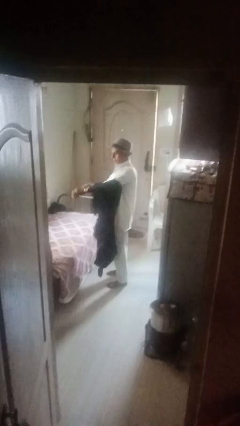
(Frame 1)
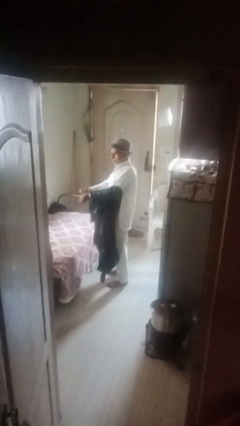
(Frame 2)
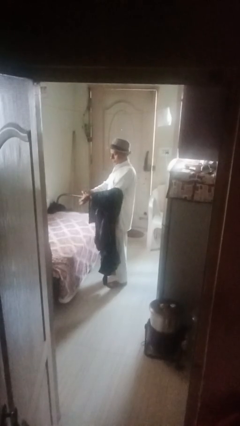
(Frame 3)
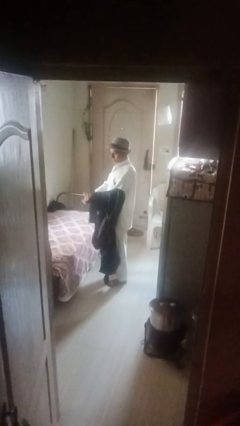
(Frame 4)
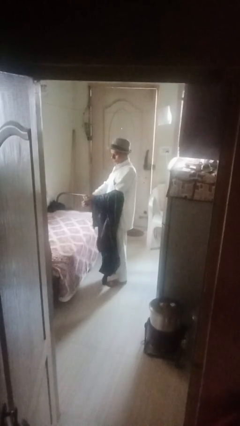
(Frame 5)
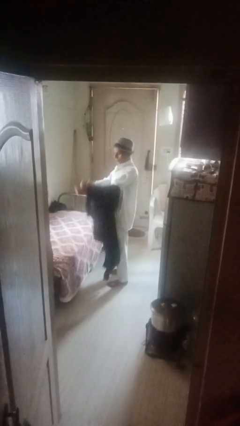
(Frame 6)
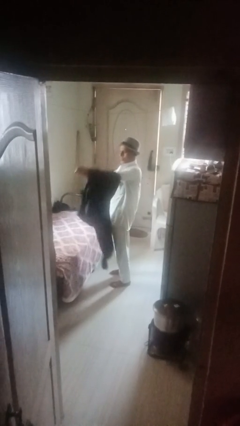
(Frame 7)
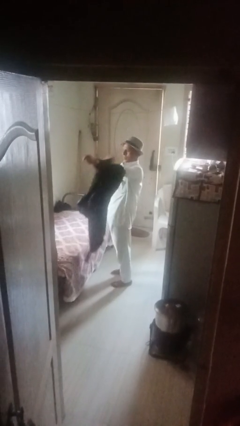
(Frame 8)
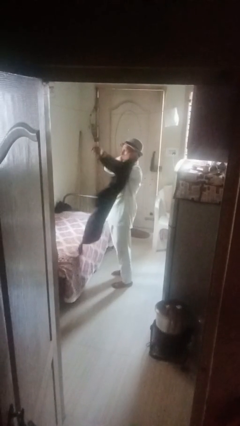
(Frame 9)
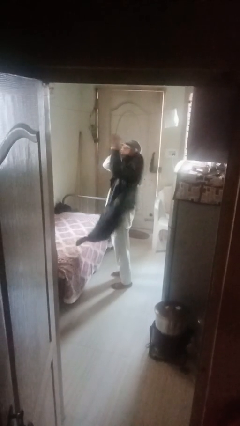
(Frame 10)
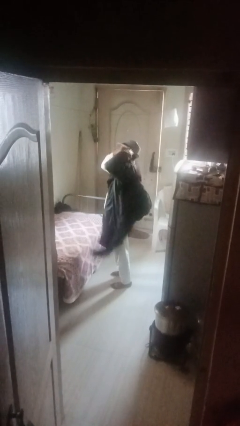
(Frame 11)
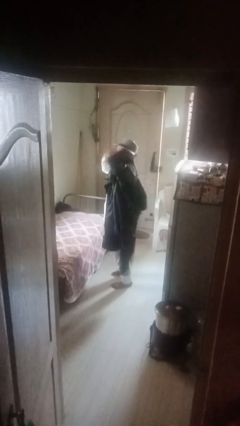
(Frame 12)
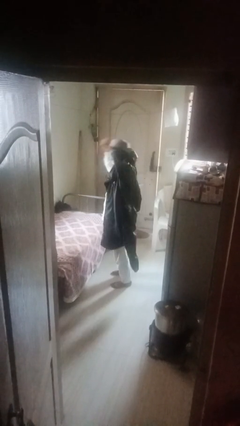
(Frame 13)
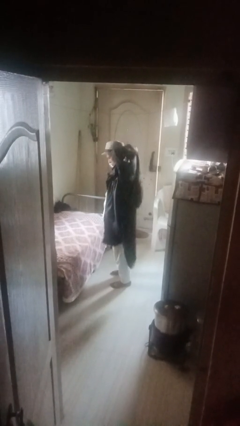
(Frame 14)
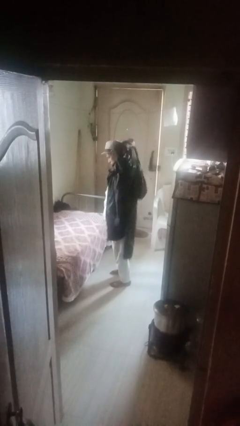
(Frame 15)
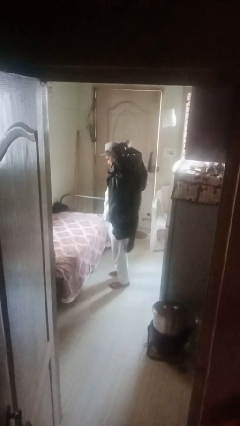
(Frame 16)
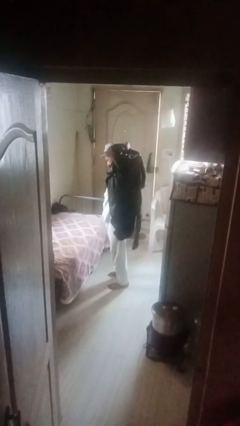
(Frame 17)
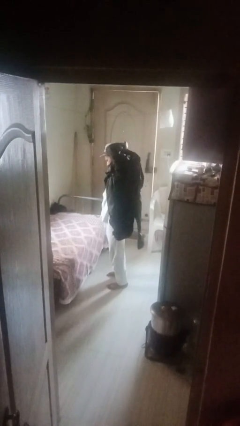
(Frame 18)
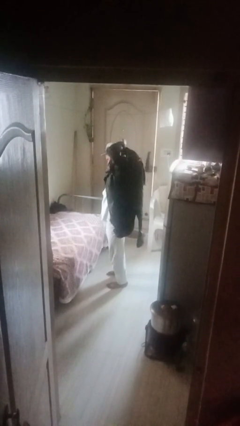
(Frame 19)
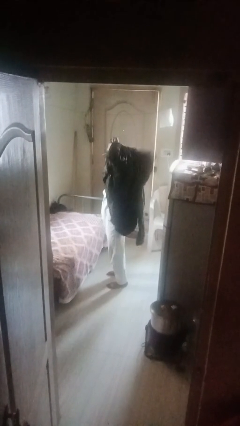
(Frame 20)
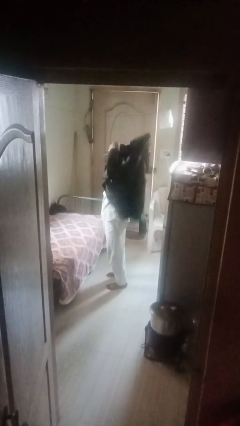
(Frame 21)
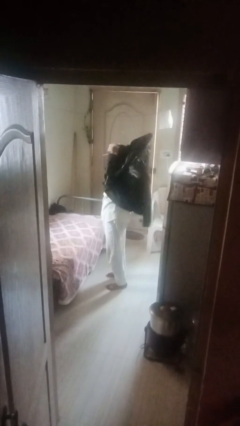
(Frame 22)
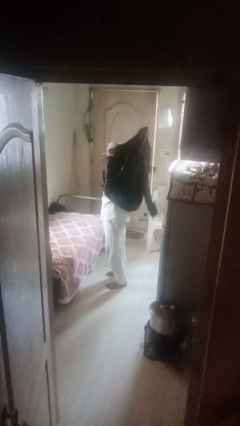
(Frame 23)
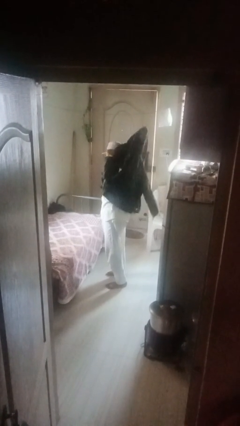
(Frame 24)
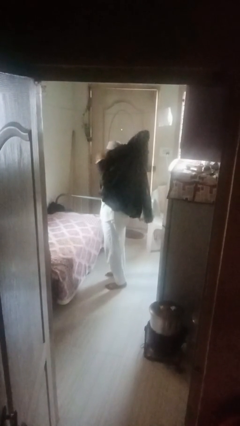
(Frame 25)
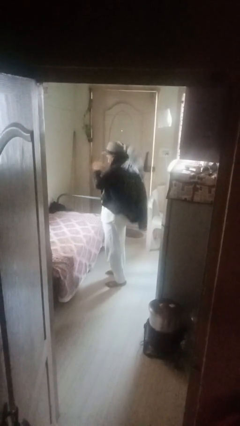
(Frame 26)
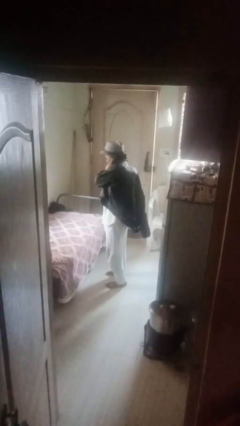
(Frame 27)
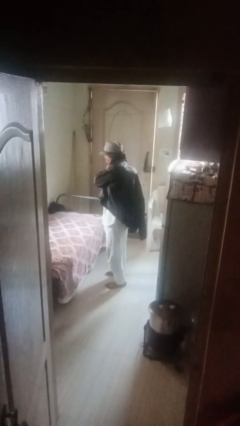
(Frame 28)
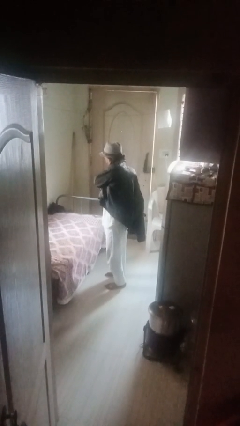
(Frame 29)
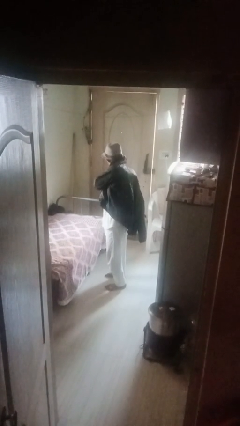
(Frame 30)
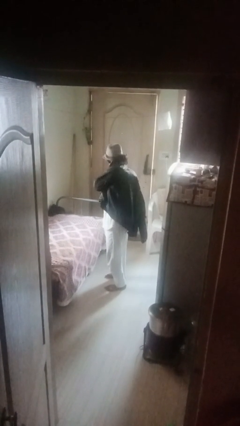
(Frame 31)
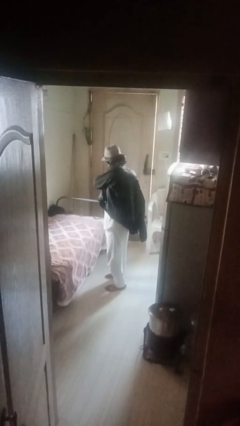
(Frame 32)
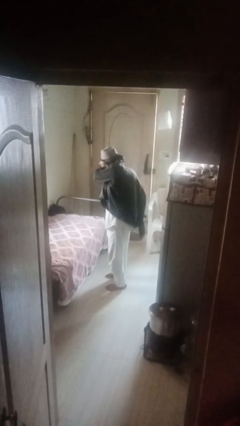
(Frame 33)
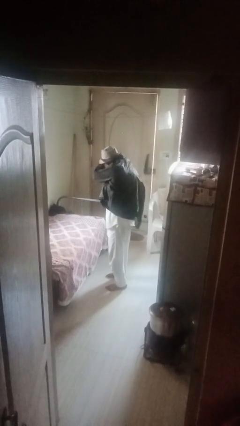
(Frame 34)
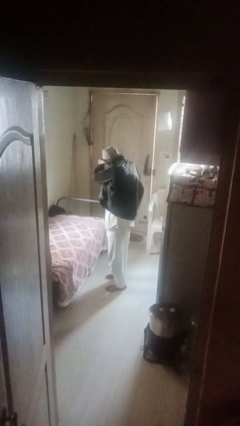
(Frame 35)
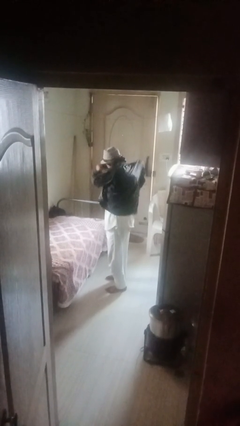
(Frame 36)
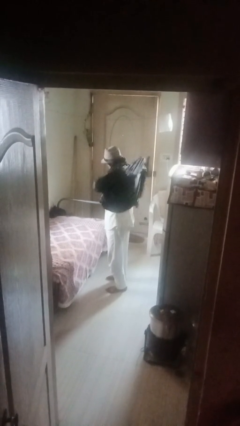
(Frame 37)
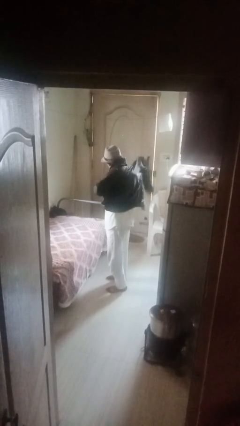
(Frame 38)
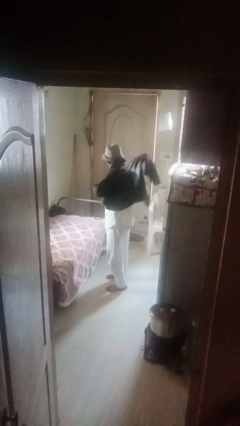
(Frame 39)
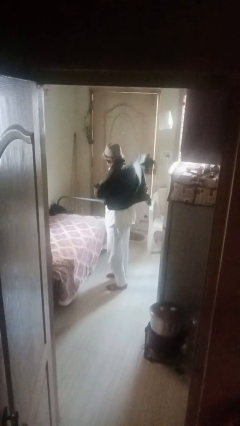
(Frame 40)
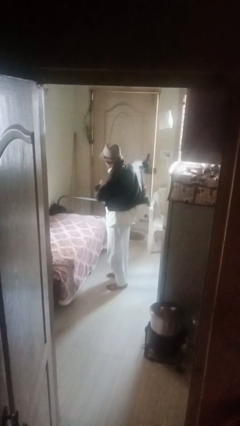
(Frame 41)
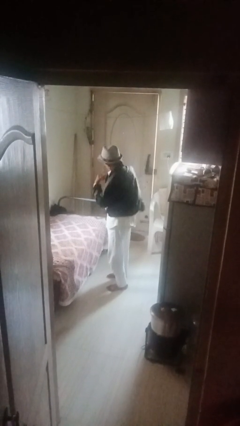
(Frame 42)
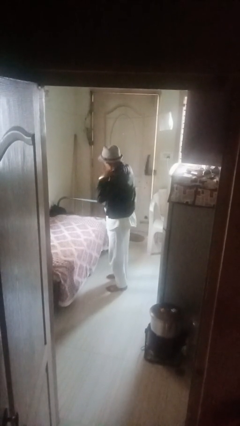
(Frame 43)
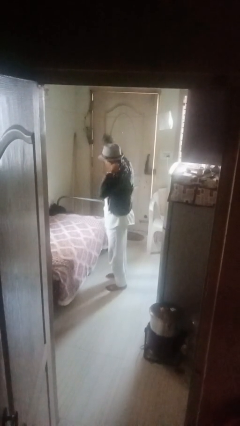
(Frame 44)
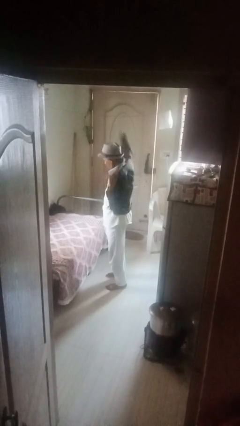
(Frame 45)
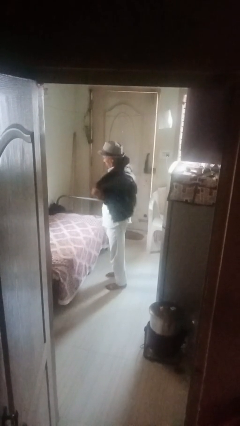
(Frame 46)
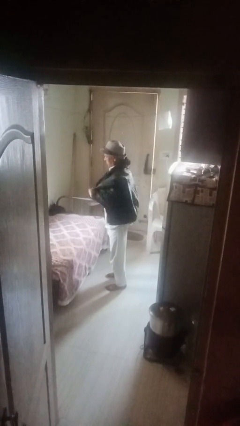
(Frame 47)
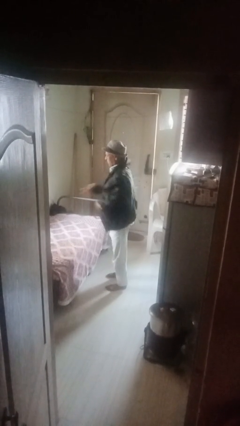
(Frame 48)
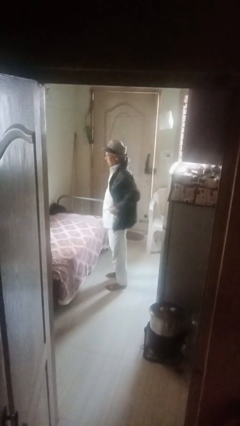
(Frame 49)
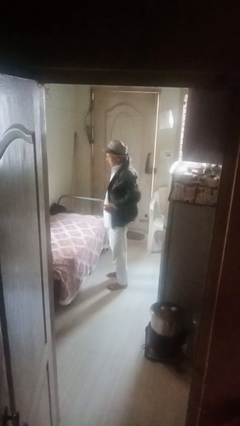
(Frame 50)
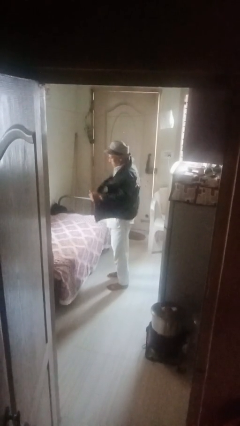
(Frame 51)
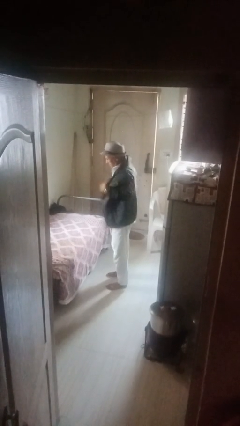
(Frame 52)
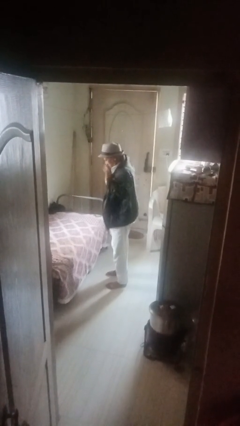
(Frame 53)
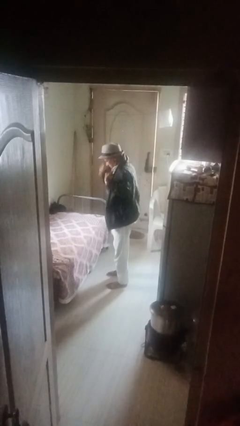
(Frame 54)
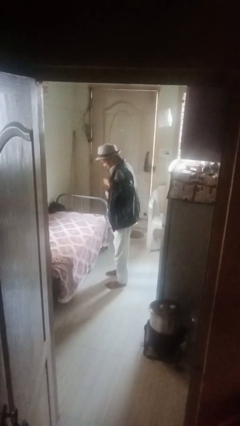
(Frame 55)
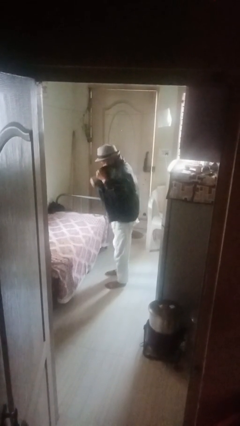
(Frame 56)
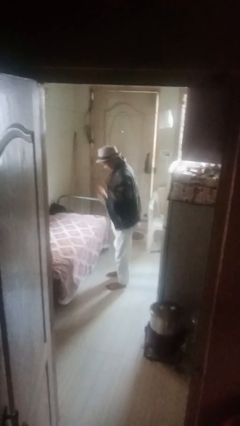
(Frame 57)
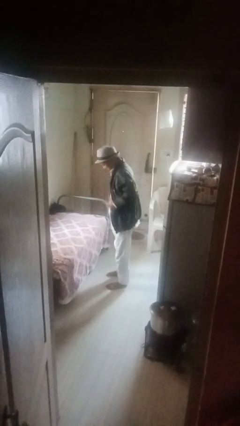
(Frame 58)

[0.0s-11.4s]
person puts on jacket

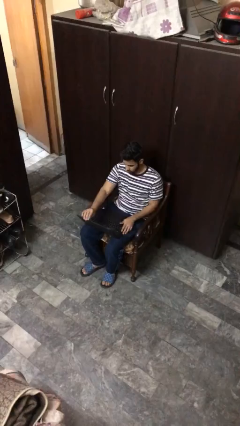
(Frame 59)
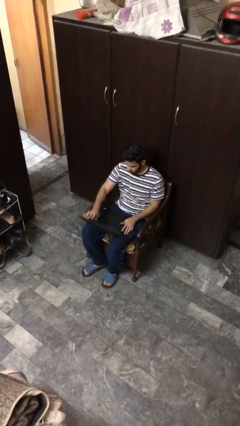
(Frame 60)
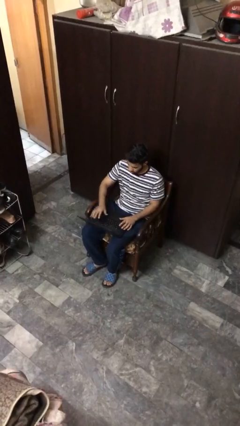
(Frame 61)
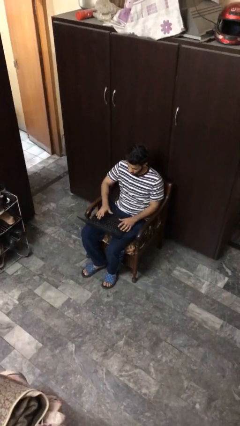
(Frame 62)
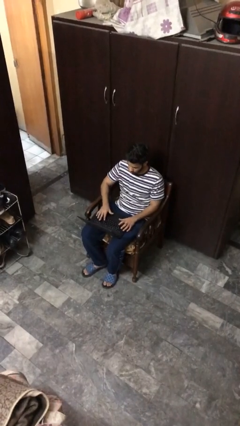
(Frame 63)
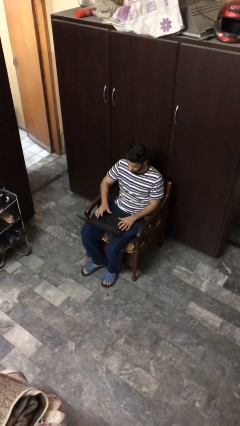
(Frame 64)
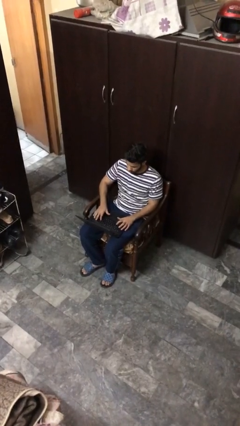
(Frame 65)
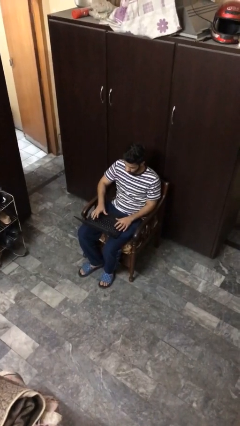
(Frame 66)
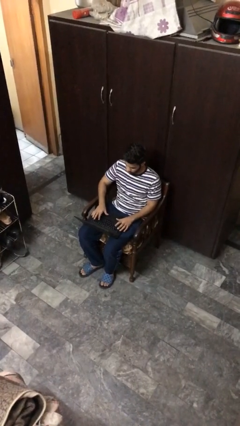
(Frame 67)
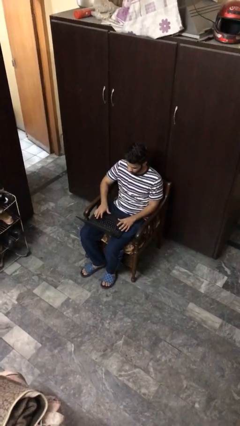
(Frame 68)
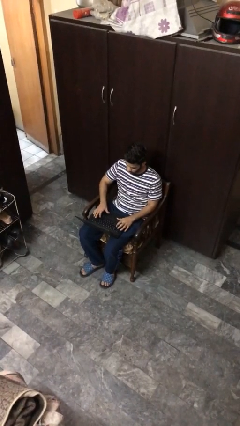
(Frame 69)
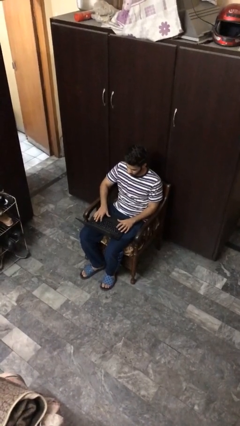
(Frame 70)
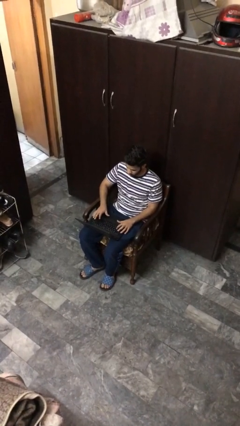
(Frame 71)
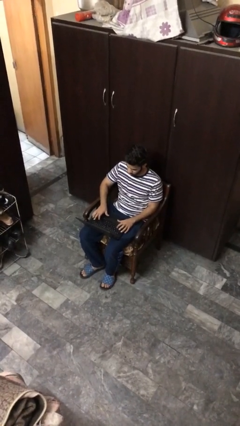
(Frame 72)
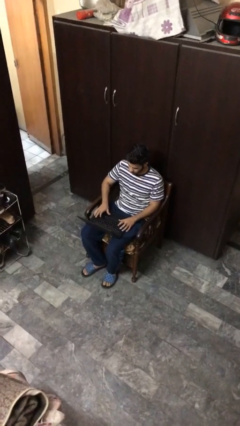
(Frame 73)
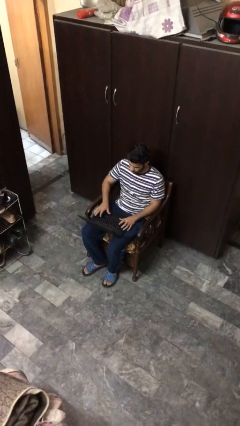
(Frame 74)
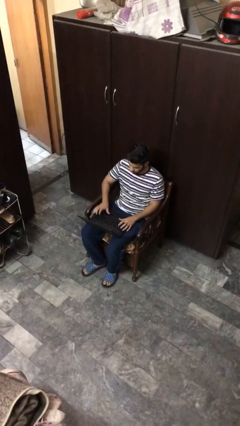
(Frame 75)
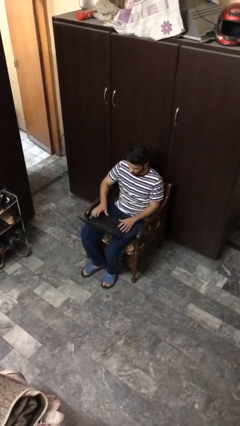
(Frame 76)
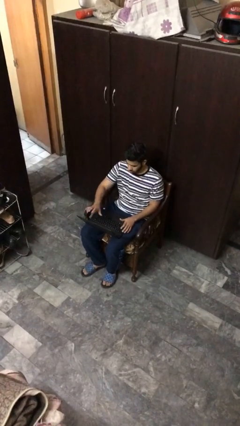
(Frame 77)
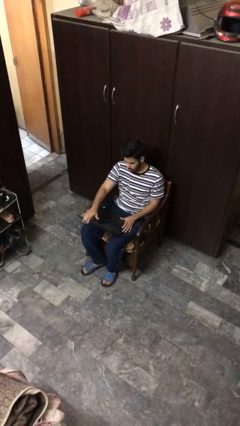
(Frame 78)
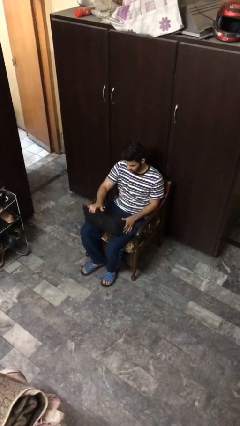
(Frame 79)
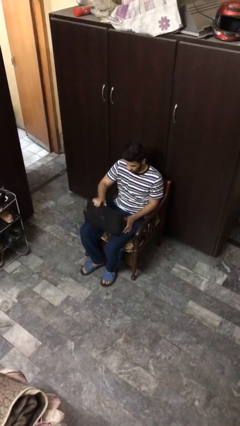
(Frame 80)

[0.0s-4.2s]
person interacts with laptop

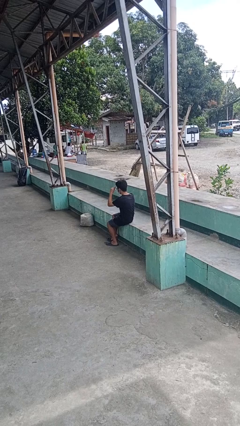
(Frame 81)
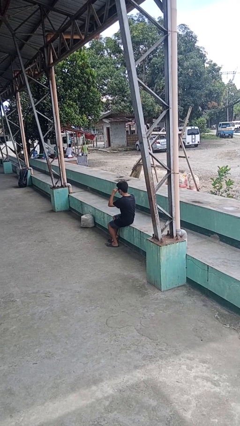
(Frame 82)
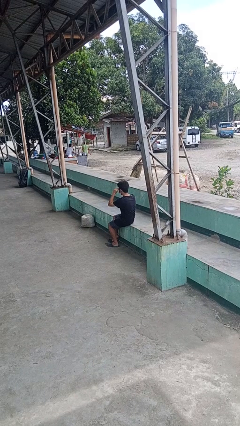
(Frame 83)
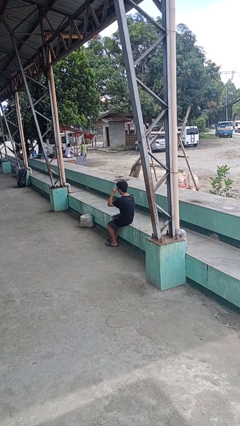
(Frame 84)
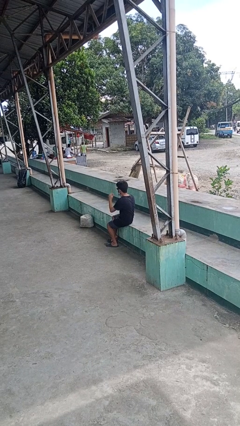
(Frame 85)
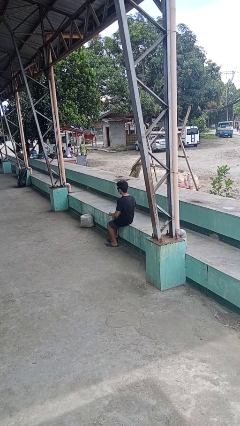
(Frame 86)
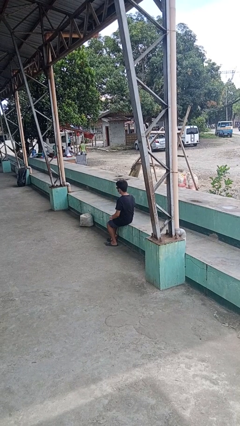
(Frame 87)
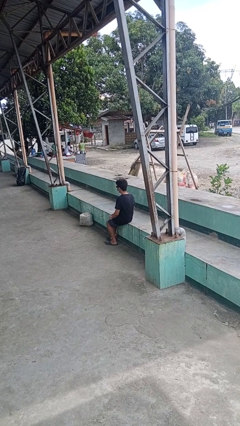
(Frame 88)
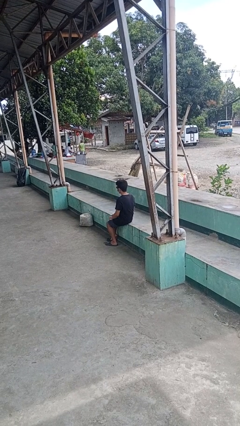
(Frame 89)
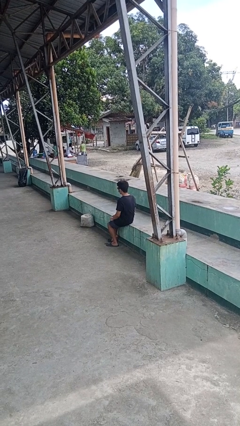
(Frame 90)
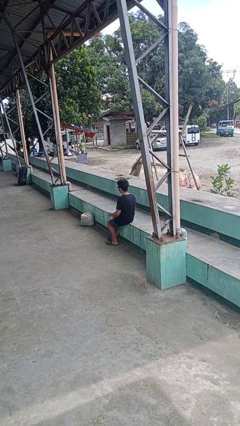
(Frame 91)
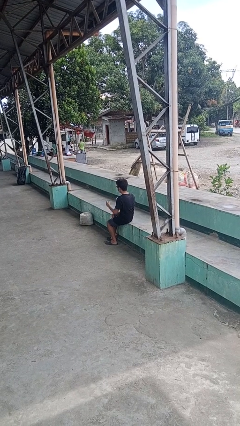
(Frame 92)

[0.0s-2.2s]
person puts on sunglasses
